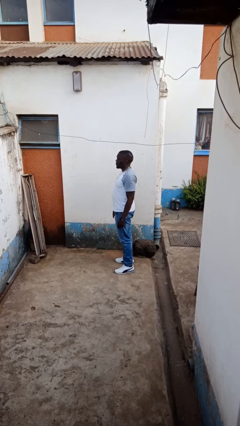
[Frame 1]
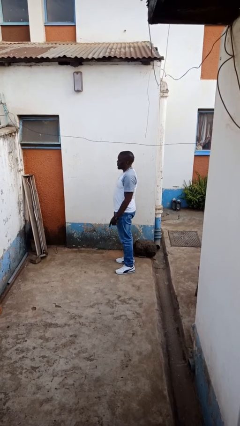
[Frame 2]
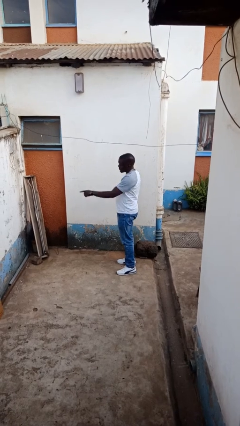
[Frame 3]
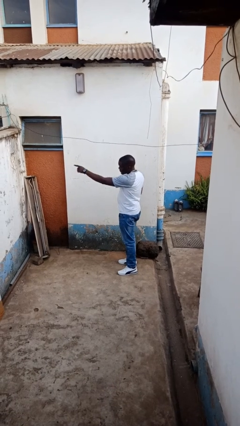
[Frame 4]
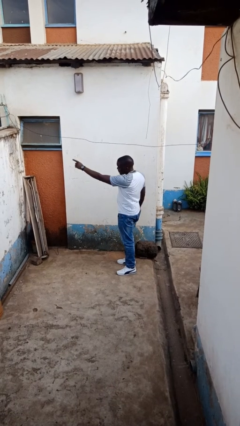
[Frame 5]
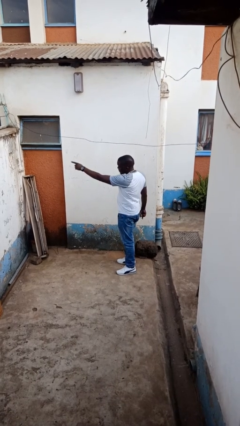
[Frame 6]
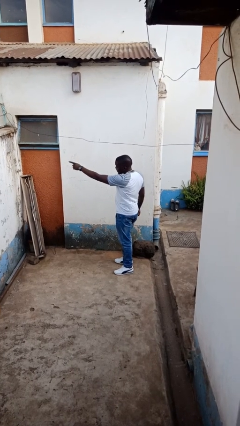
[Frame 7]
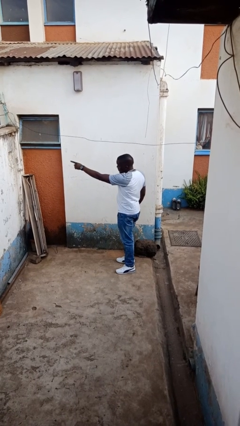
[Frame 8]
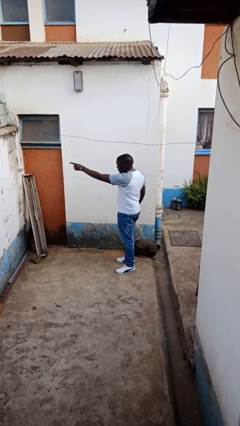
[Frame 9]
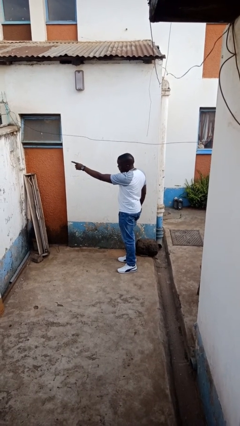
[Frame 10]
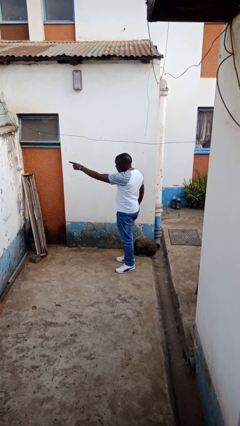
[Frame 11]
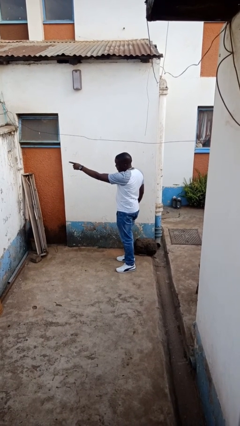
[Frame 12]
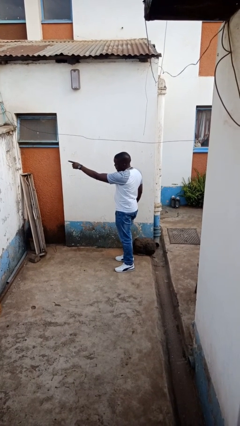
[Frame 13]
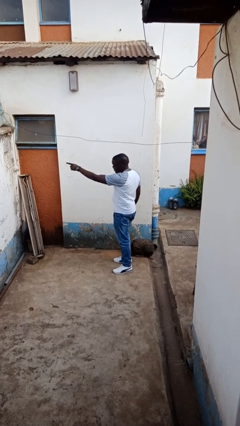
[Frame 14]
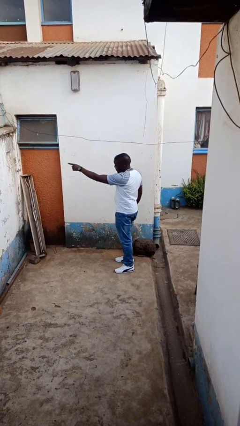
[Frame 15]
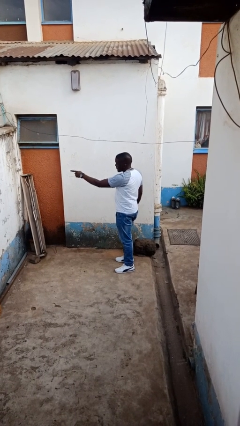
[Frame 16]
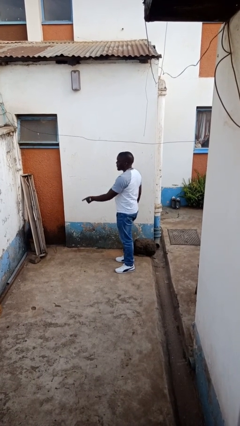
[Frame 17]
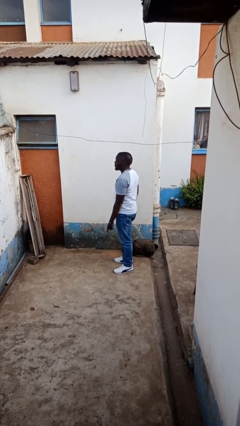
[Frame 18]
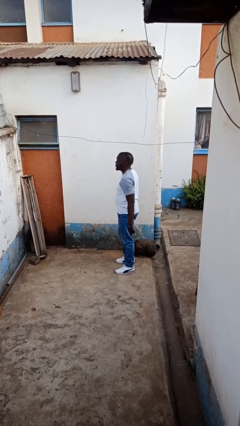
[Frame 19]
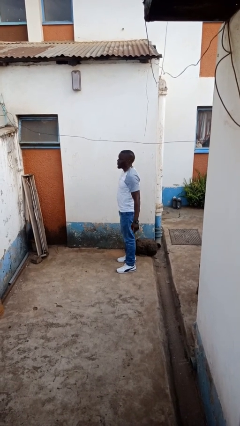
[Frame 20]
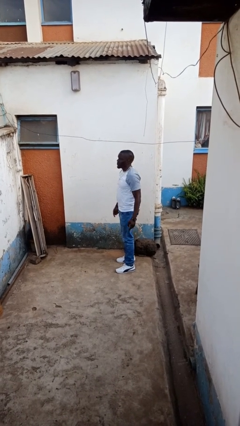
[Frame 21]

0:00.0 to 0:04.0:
person points at person

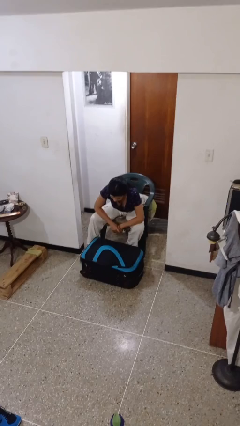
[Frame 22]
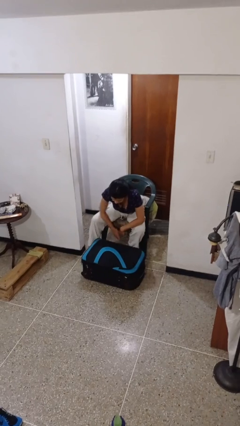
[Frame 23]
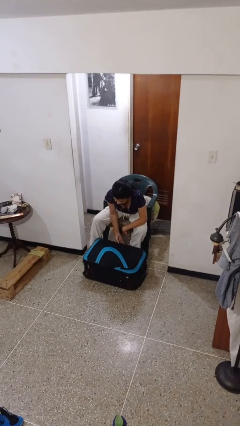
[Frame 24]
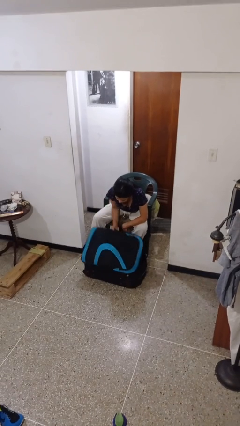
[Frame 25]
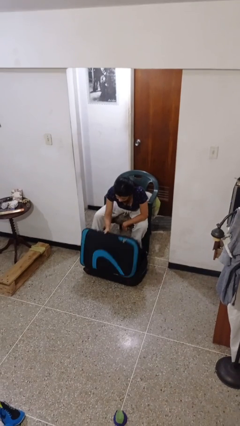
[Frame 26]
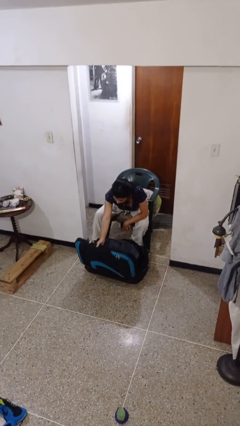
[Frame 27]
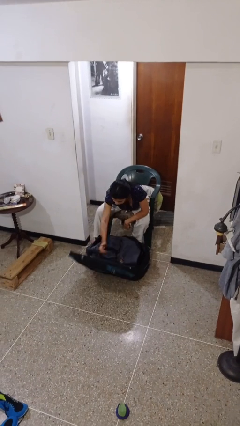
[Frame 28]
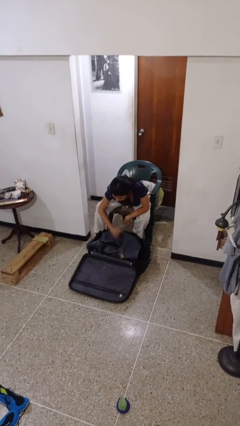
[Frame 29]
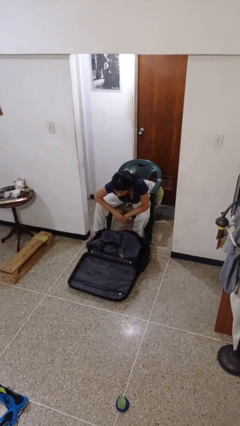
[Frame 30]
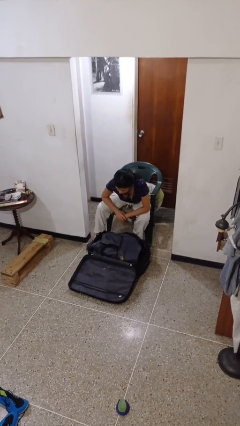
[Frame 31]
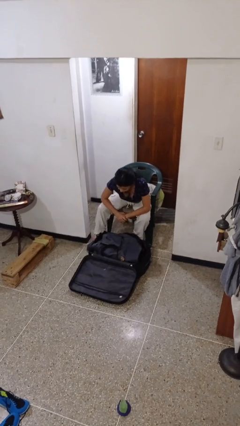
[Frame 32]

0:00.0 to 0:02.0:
person opens suitcase

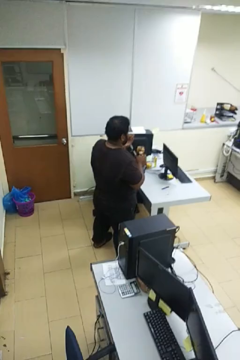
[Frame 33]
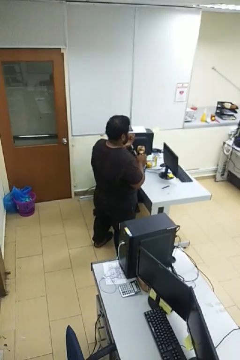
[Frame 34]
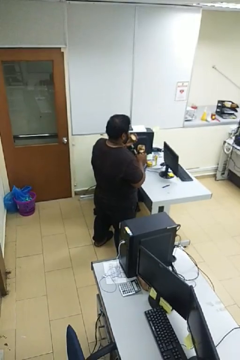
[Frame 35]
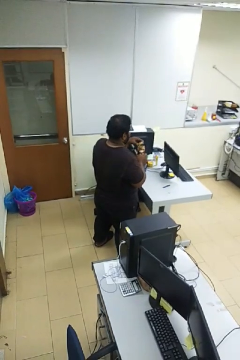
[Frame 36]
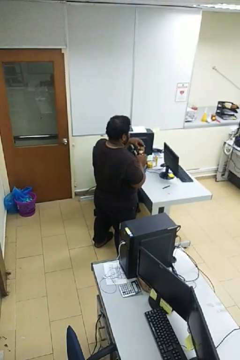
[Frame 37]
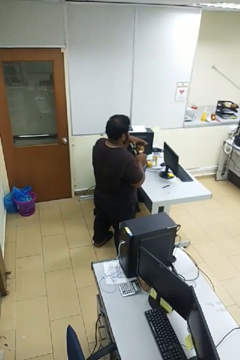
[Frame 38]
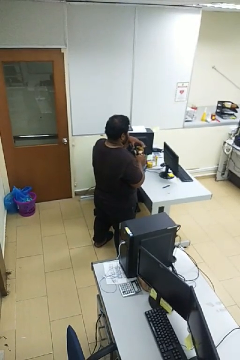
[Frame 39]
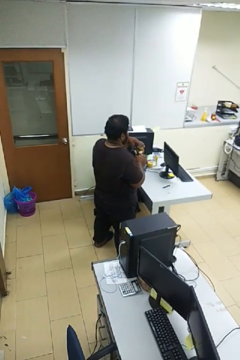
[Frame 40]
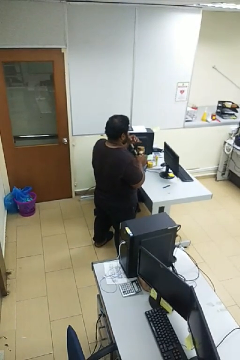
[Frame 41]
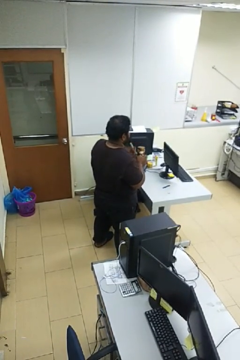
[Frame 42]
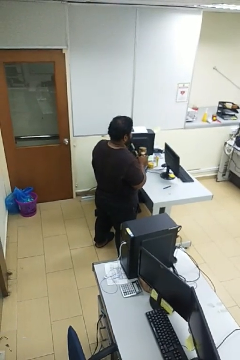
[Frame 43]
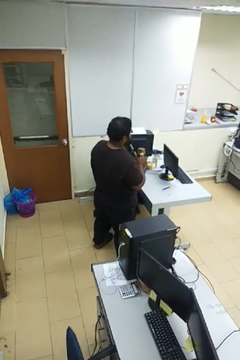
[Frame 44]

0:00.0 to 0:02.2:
person closes jar

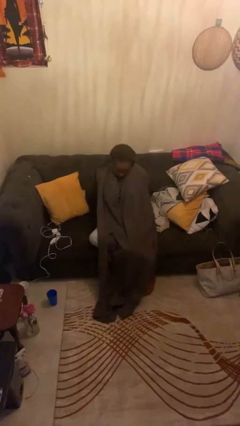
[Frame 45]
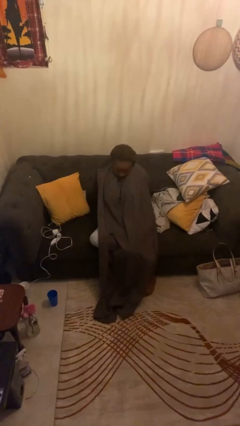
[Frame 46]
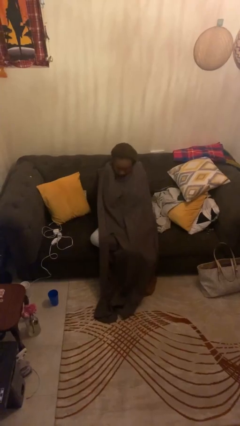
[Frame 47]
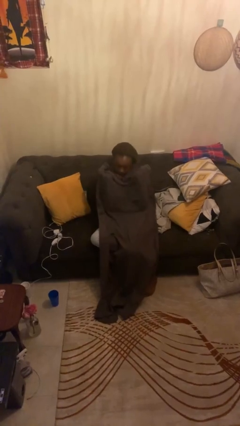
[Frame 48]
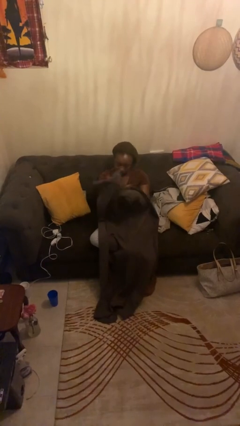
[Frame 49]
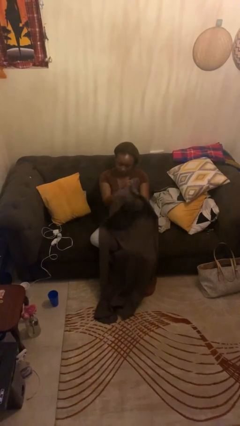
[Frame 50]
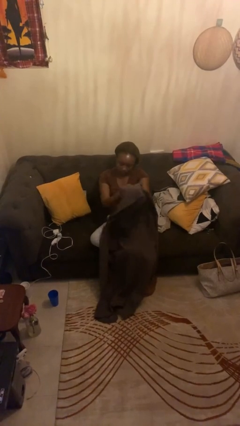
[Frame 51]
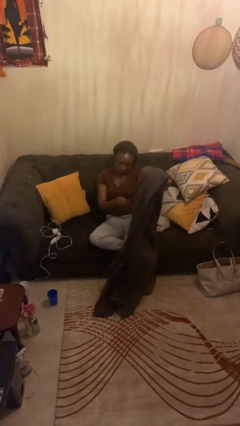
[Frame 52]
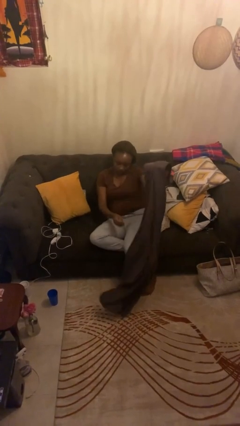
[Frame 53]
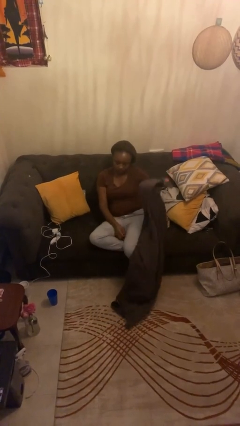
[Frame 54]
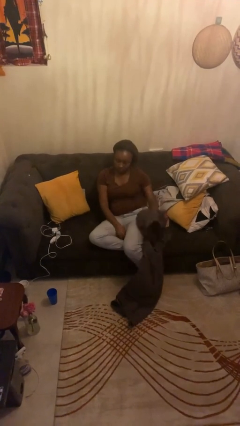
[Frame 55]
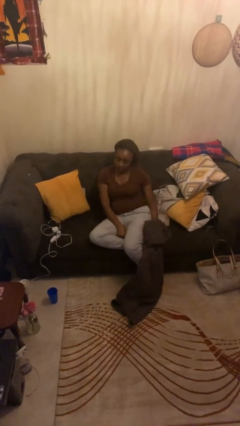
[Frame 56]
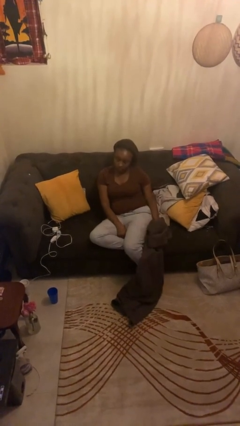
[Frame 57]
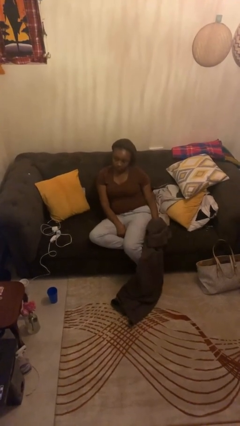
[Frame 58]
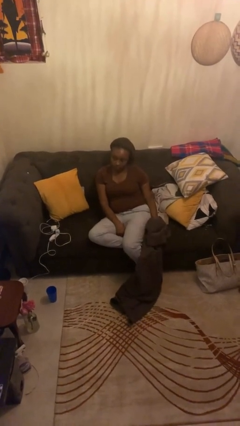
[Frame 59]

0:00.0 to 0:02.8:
person uncovers with blanket

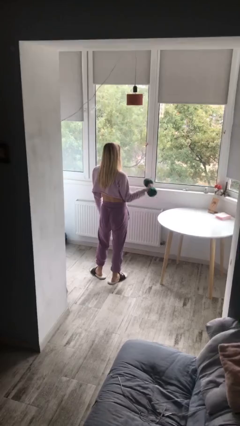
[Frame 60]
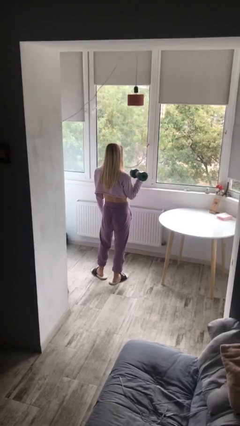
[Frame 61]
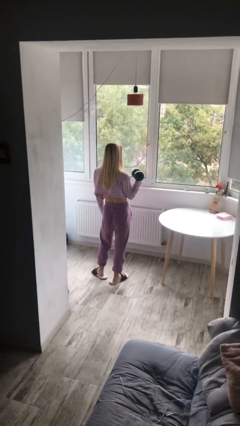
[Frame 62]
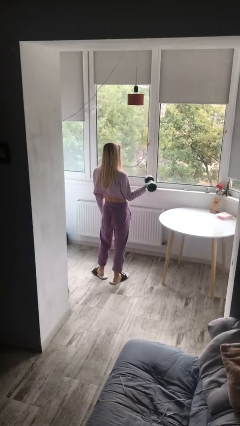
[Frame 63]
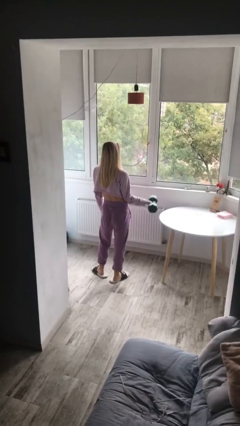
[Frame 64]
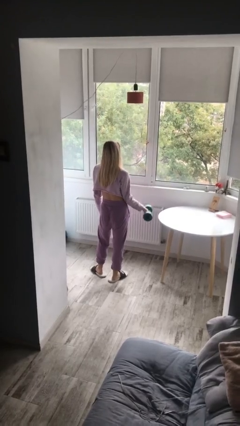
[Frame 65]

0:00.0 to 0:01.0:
person lifts dumbbells

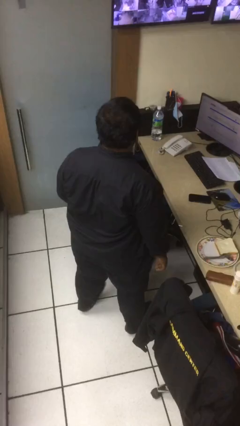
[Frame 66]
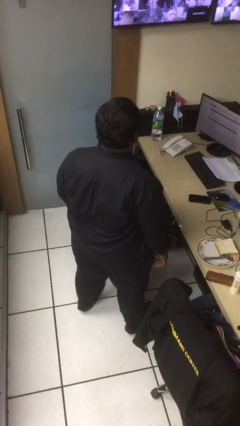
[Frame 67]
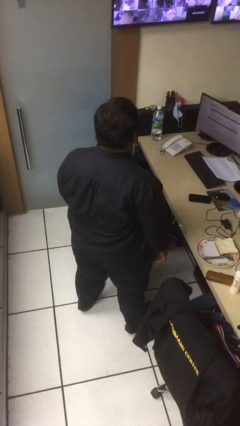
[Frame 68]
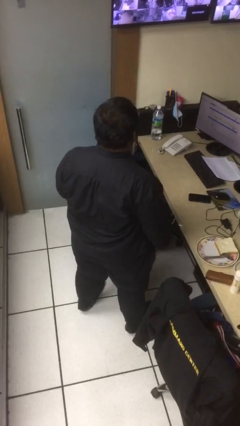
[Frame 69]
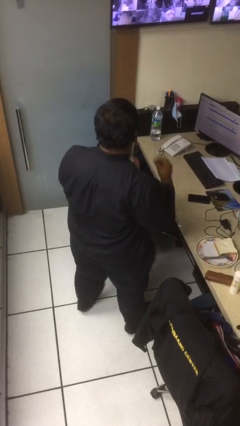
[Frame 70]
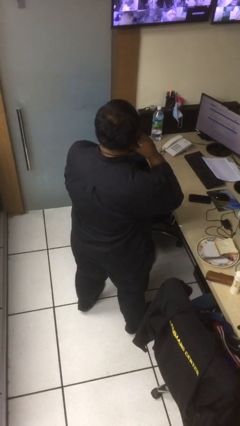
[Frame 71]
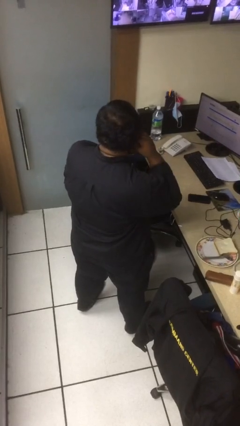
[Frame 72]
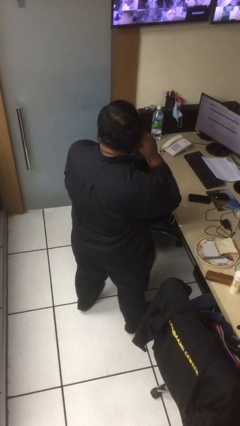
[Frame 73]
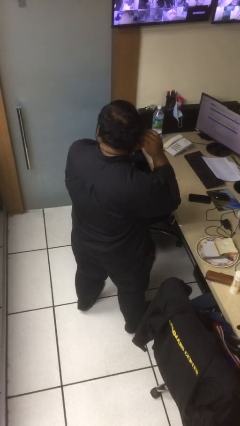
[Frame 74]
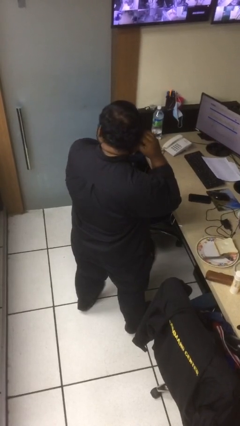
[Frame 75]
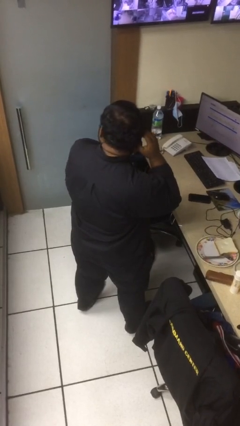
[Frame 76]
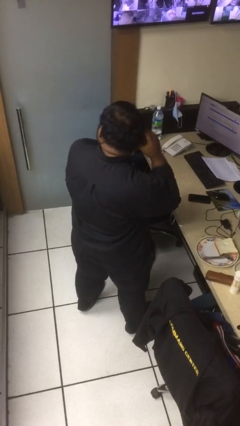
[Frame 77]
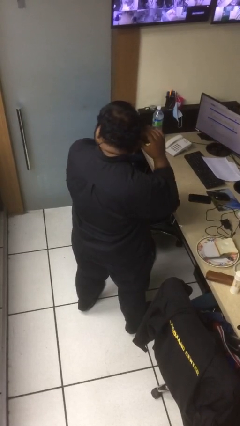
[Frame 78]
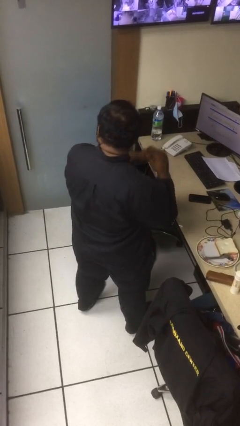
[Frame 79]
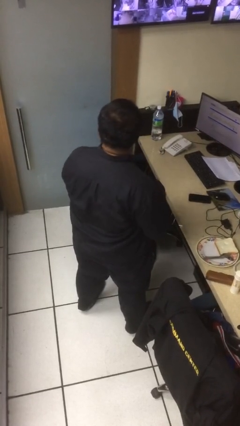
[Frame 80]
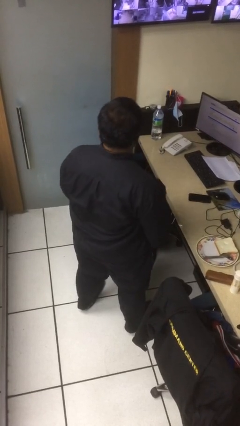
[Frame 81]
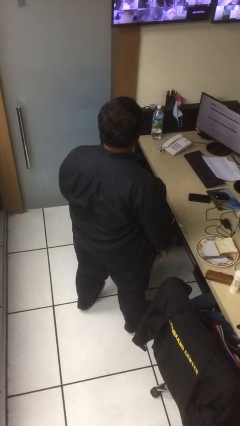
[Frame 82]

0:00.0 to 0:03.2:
person takes off earrings

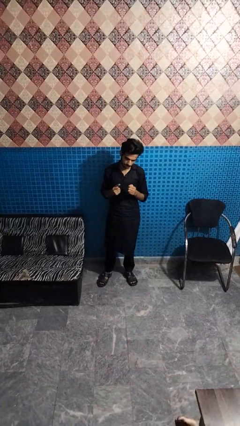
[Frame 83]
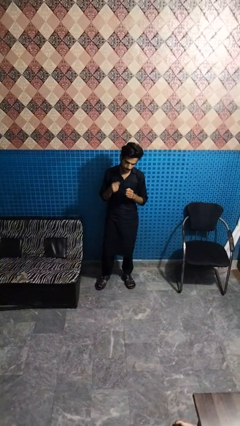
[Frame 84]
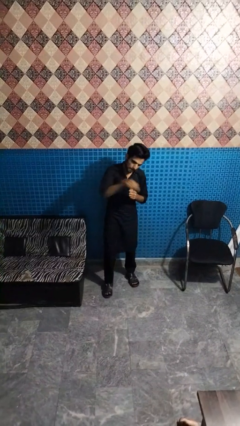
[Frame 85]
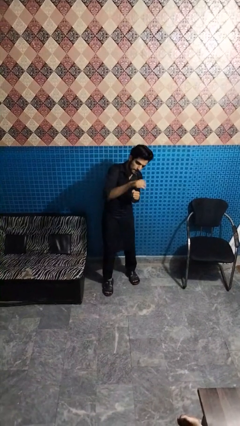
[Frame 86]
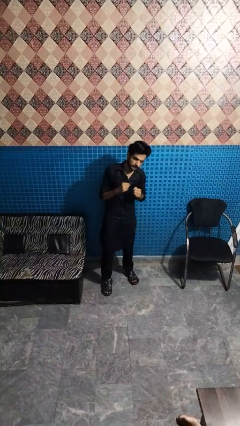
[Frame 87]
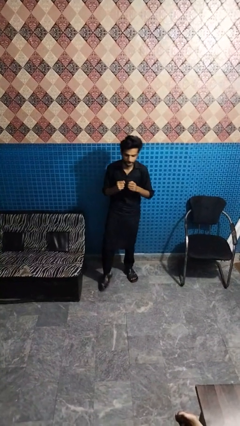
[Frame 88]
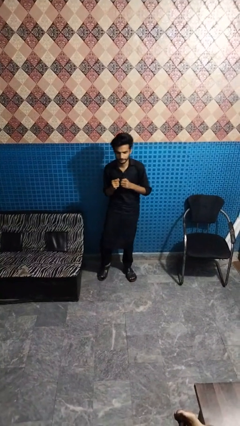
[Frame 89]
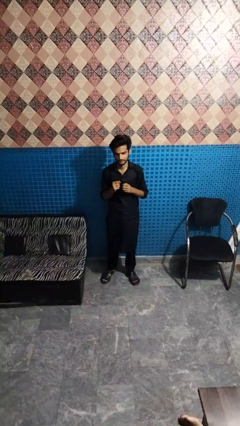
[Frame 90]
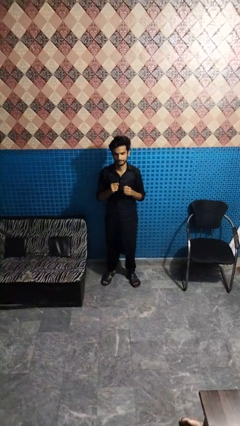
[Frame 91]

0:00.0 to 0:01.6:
person punches

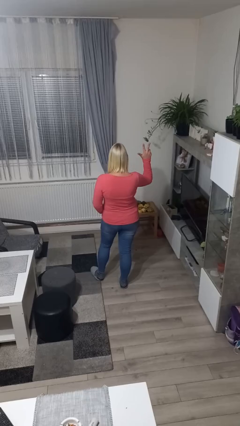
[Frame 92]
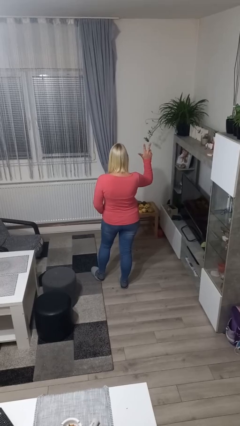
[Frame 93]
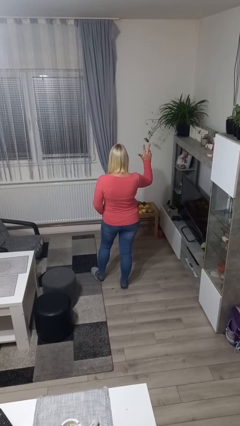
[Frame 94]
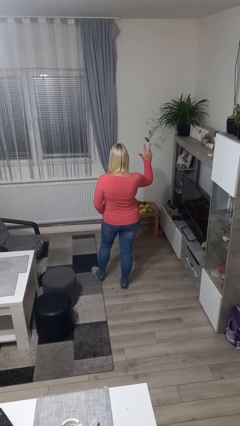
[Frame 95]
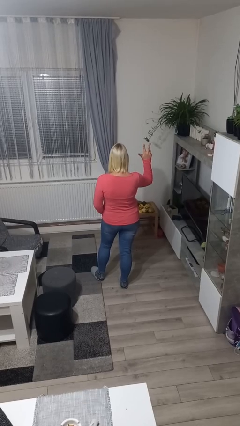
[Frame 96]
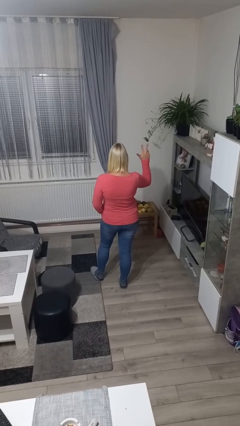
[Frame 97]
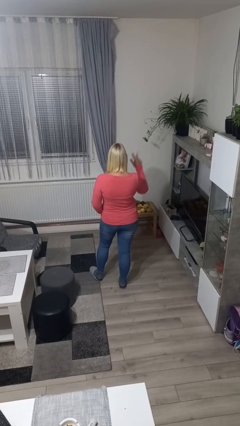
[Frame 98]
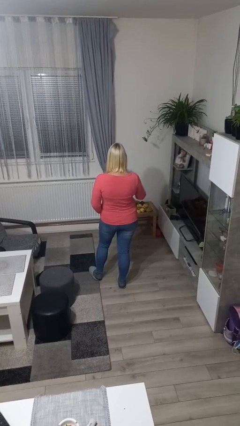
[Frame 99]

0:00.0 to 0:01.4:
person gestures number three
